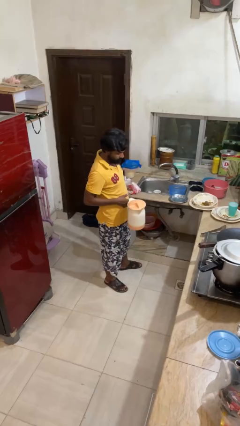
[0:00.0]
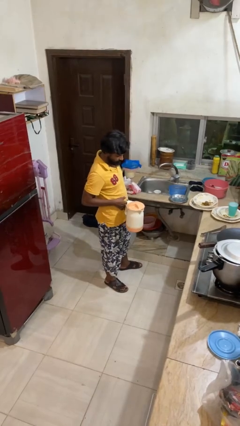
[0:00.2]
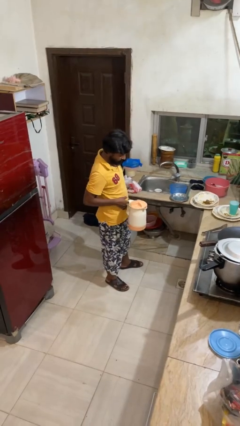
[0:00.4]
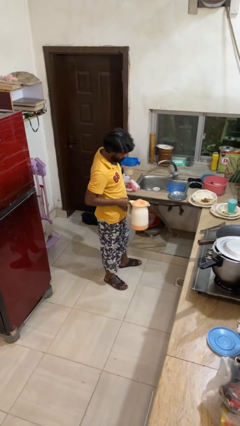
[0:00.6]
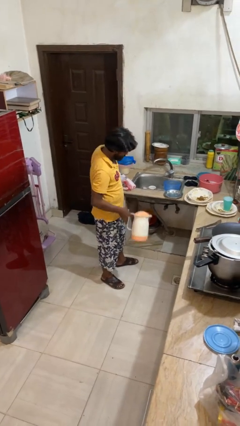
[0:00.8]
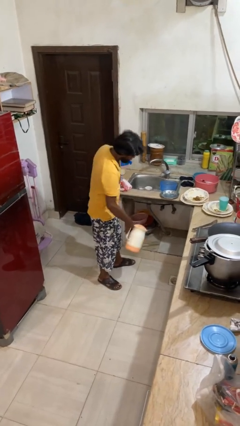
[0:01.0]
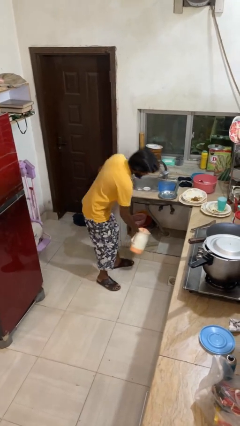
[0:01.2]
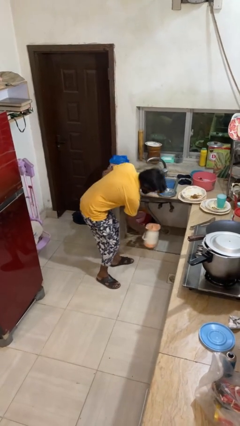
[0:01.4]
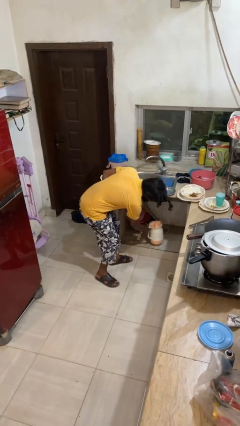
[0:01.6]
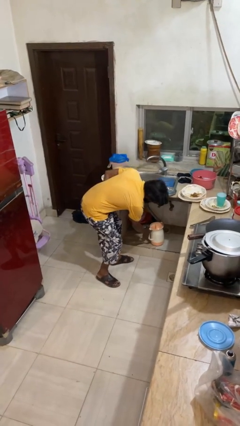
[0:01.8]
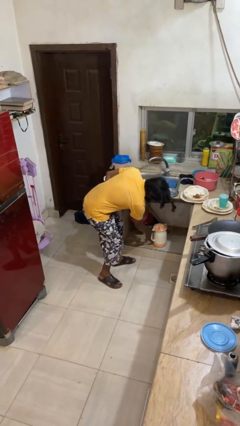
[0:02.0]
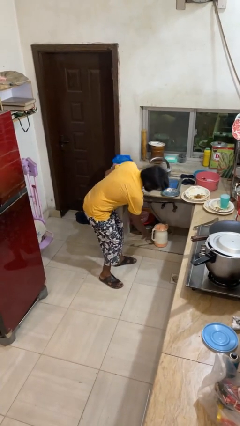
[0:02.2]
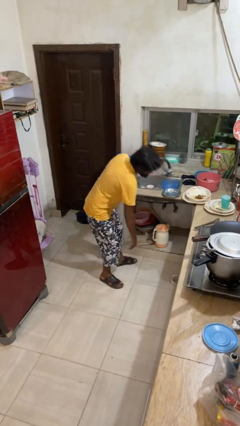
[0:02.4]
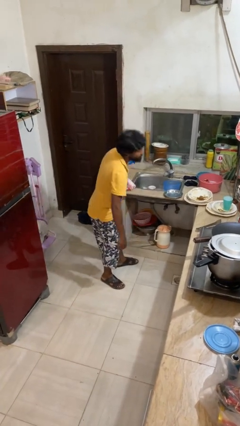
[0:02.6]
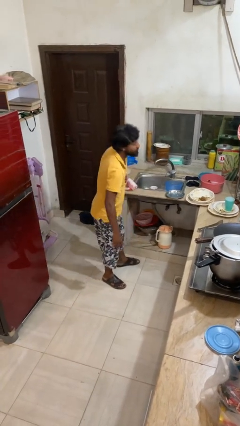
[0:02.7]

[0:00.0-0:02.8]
person puts down object into cabinet

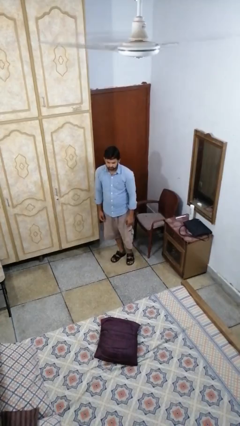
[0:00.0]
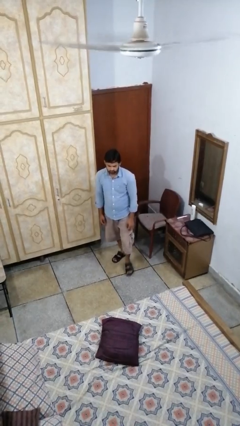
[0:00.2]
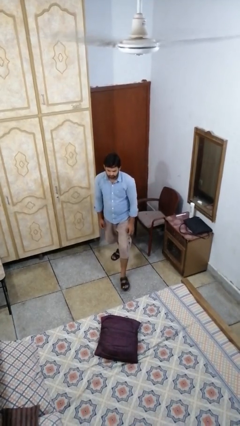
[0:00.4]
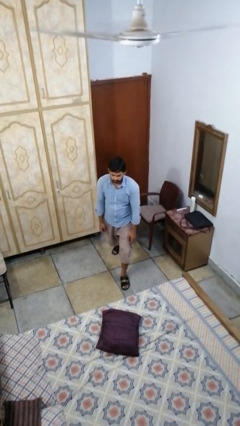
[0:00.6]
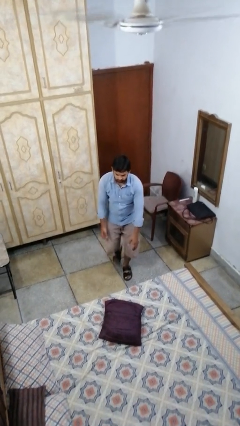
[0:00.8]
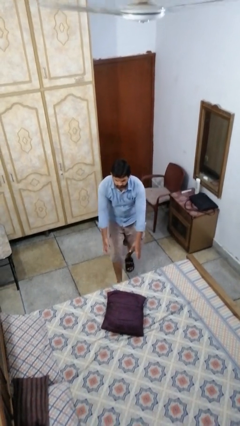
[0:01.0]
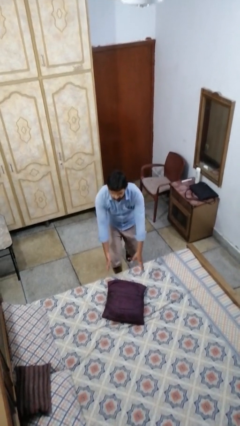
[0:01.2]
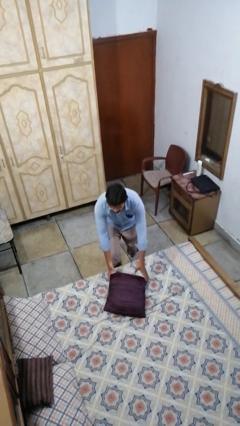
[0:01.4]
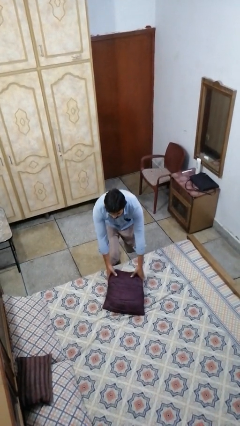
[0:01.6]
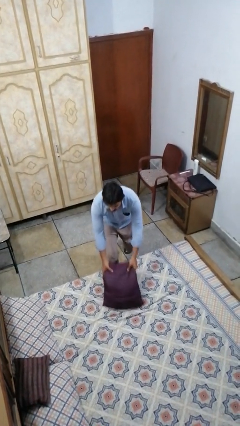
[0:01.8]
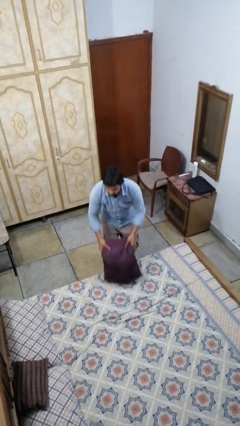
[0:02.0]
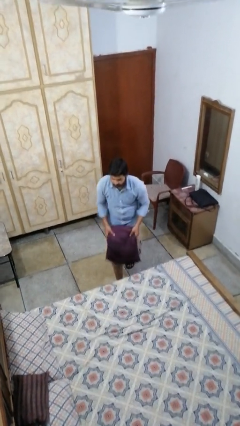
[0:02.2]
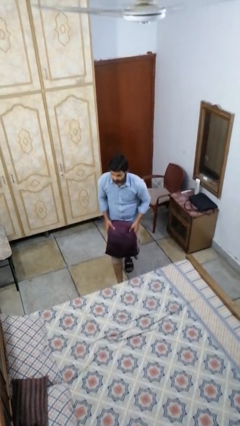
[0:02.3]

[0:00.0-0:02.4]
person picks up object from bed

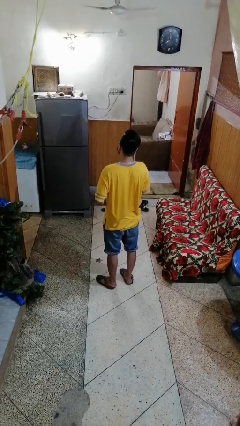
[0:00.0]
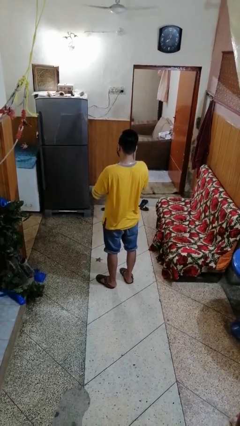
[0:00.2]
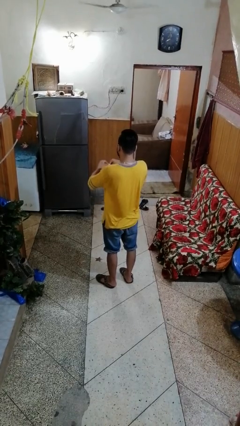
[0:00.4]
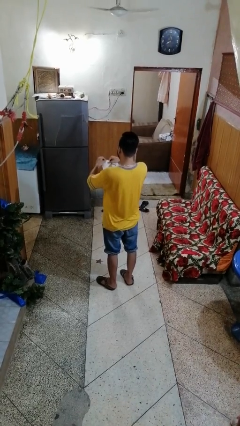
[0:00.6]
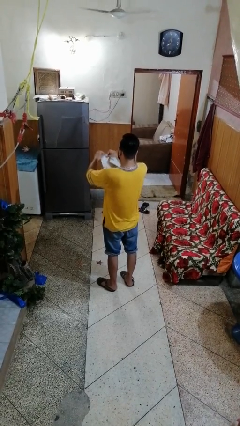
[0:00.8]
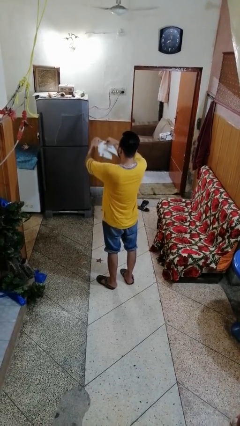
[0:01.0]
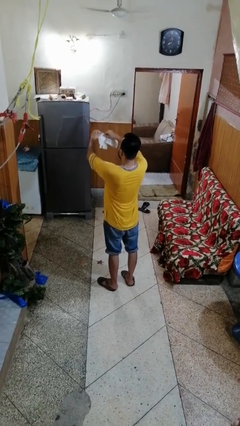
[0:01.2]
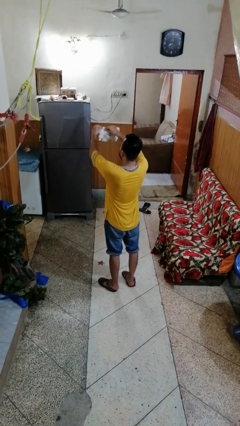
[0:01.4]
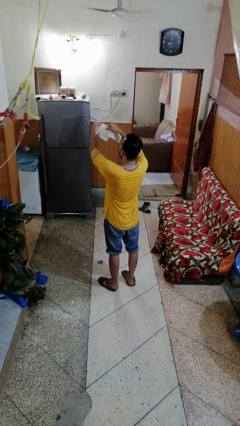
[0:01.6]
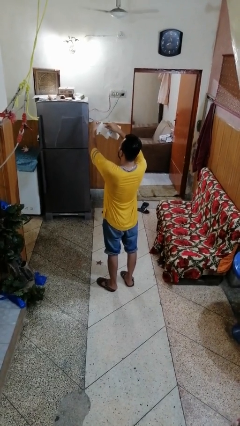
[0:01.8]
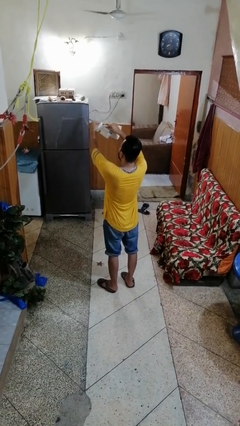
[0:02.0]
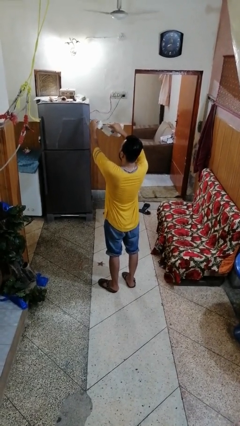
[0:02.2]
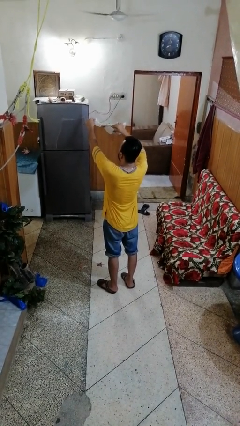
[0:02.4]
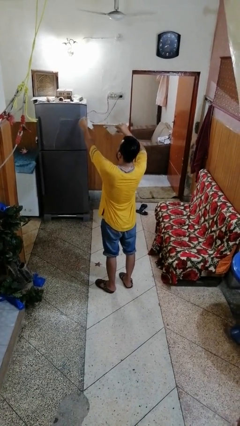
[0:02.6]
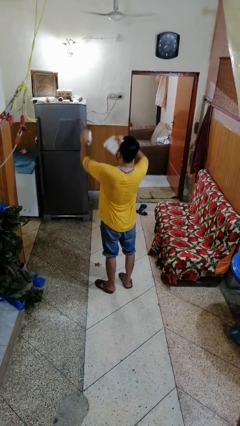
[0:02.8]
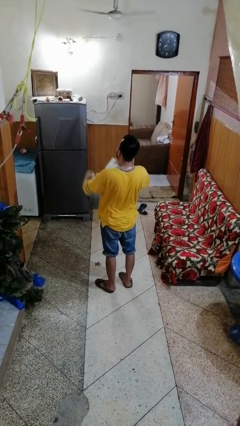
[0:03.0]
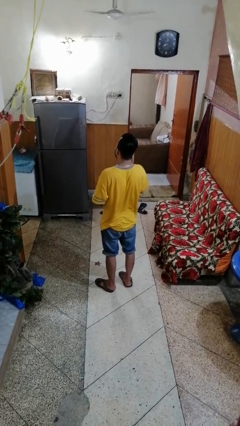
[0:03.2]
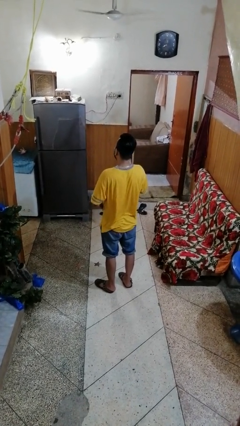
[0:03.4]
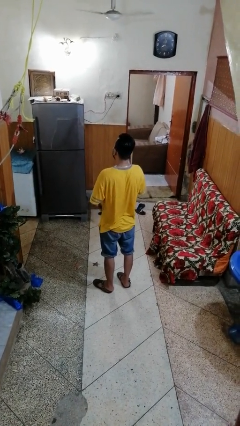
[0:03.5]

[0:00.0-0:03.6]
person tears paper

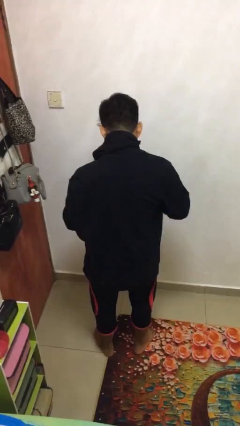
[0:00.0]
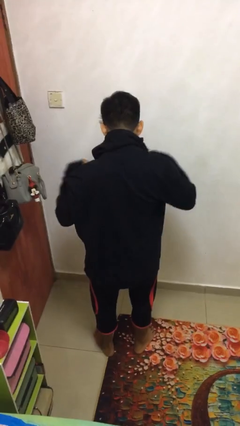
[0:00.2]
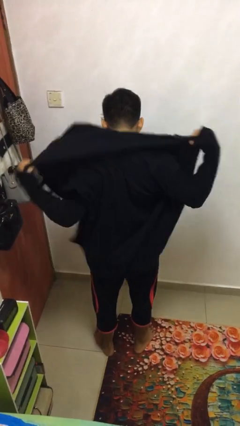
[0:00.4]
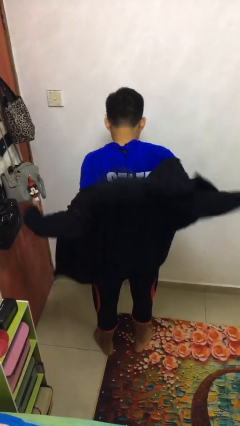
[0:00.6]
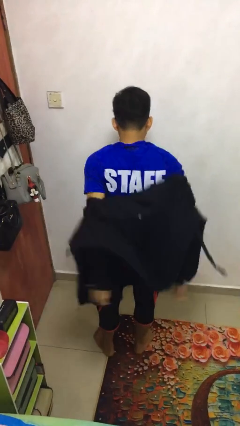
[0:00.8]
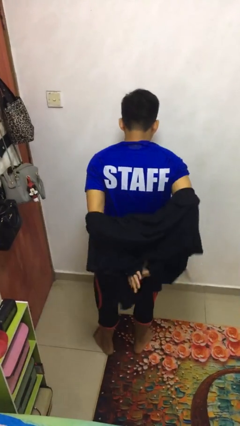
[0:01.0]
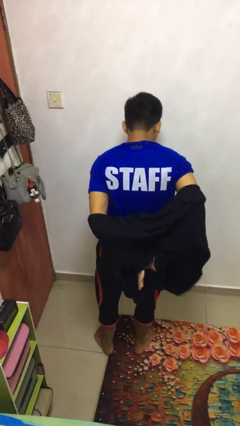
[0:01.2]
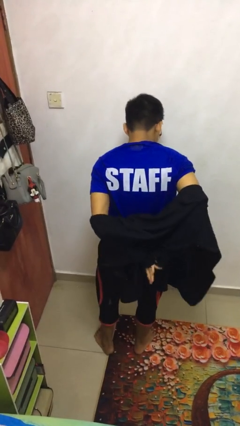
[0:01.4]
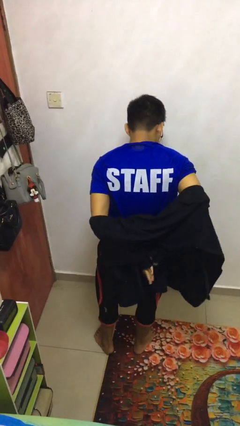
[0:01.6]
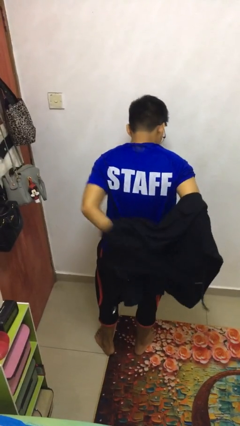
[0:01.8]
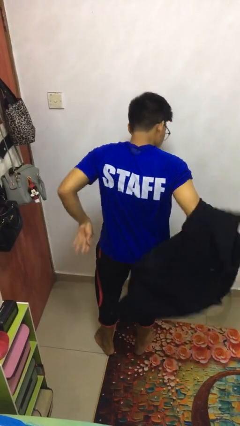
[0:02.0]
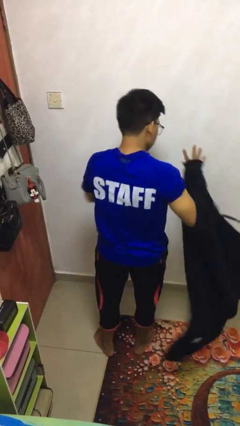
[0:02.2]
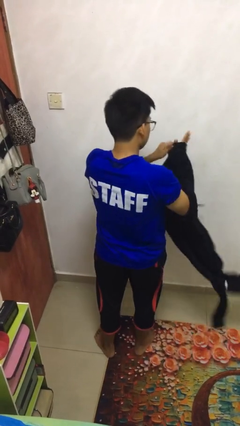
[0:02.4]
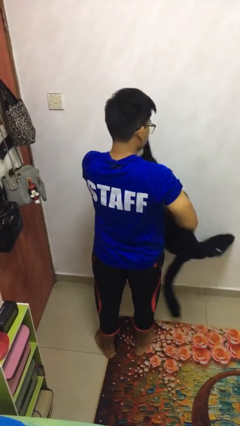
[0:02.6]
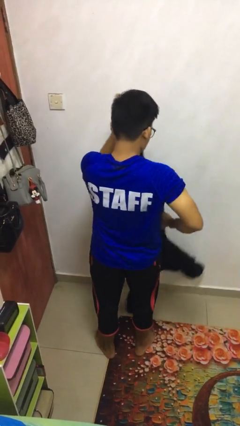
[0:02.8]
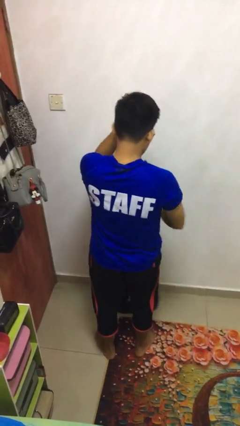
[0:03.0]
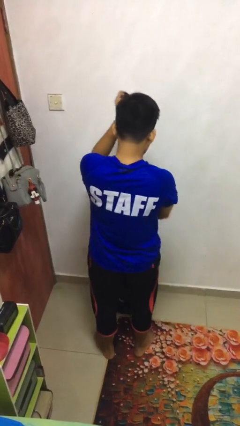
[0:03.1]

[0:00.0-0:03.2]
person takes off jacket

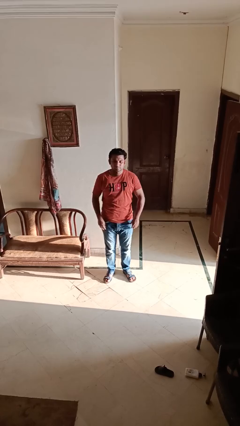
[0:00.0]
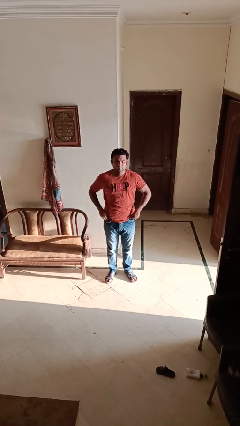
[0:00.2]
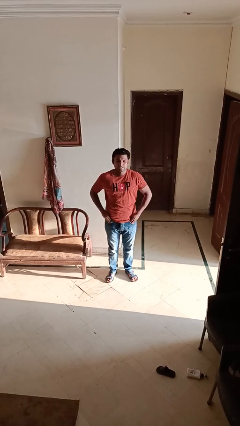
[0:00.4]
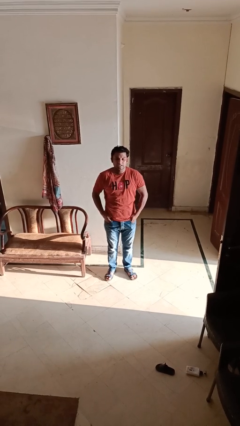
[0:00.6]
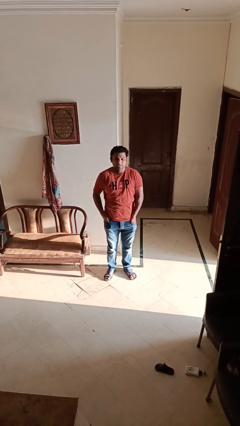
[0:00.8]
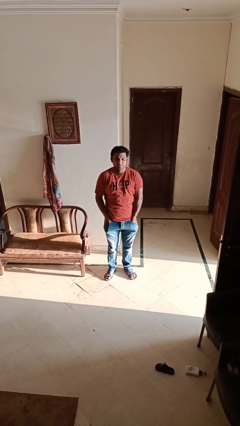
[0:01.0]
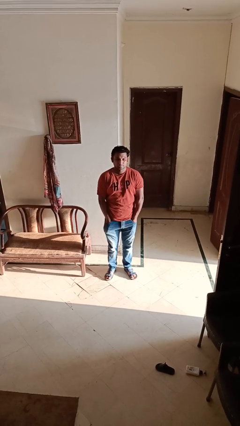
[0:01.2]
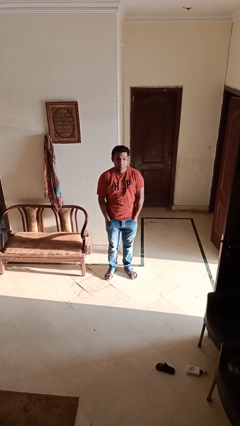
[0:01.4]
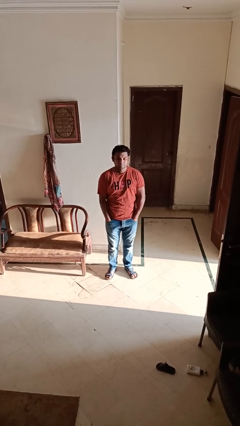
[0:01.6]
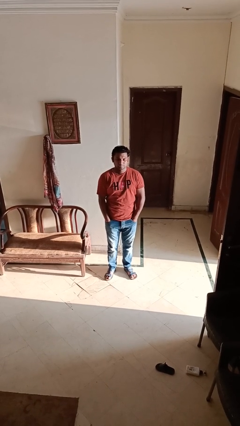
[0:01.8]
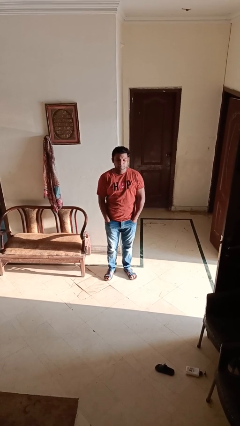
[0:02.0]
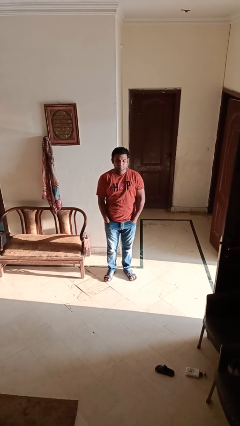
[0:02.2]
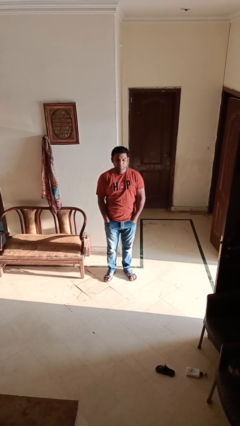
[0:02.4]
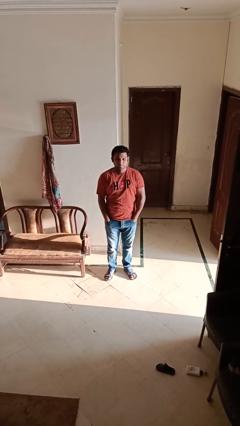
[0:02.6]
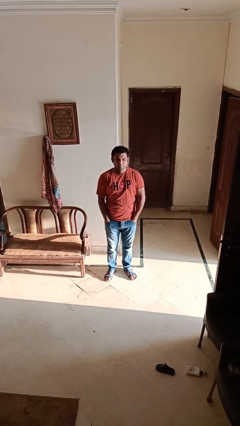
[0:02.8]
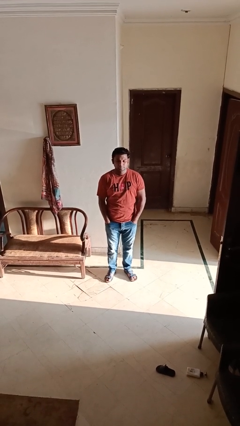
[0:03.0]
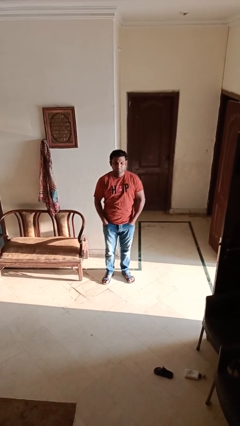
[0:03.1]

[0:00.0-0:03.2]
person puts hands in back pockets

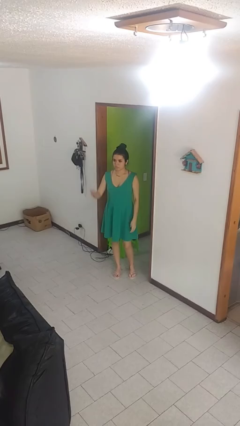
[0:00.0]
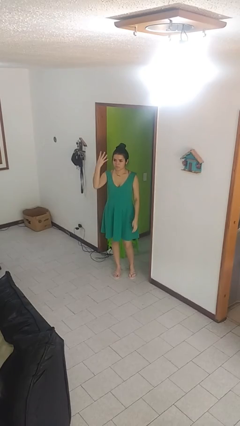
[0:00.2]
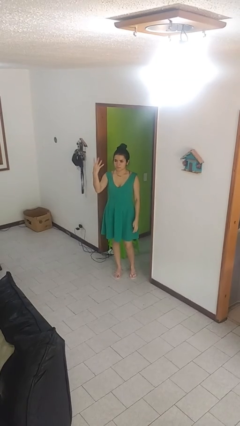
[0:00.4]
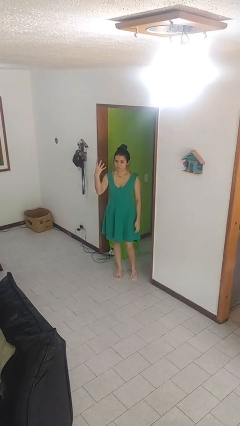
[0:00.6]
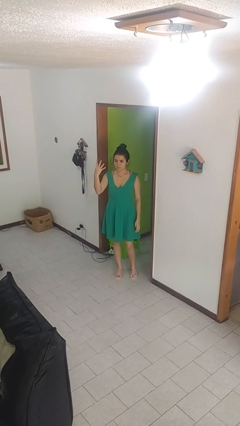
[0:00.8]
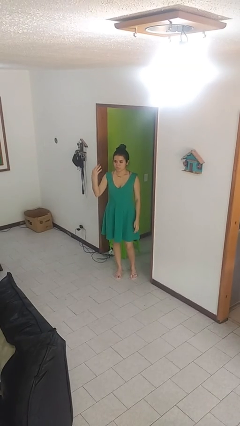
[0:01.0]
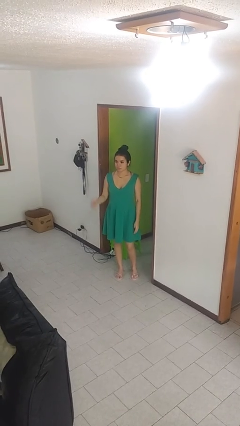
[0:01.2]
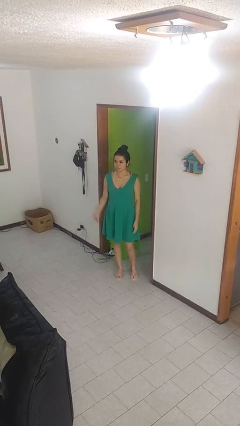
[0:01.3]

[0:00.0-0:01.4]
person gestures number four

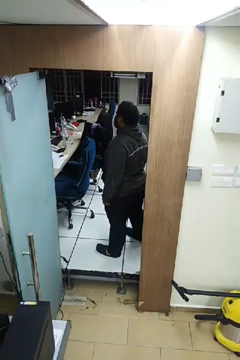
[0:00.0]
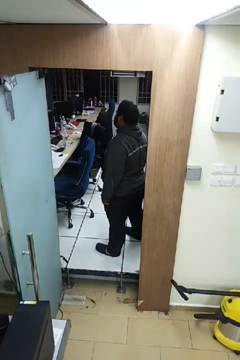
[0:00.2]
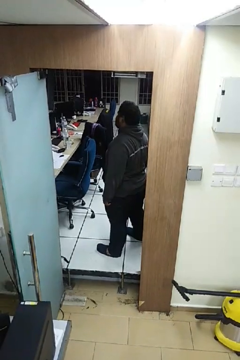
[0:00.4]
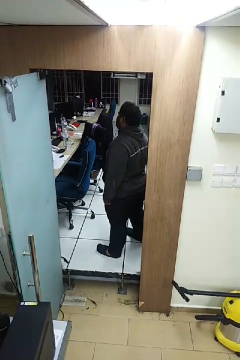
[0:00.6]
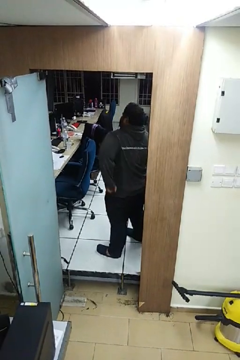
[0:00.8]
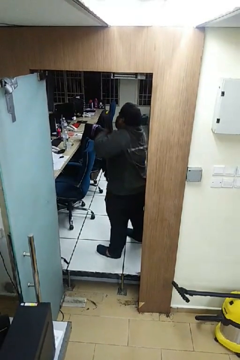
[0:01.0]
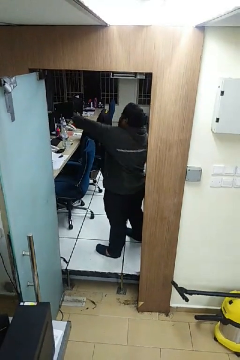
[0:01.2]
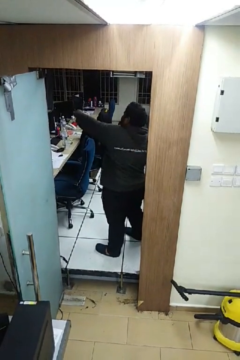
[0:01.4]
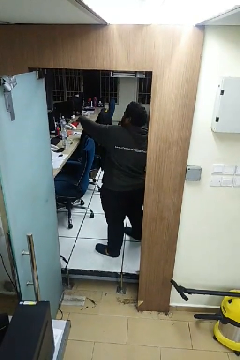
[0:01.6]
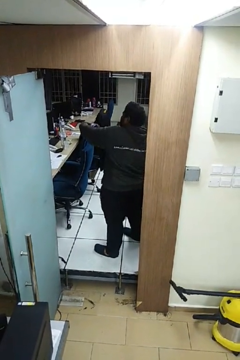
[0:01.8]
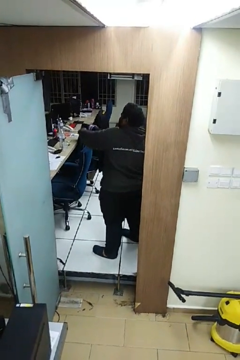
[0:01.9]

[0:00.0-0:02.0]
person punches
